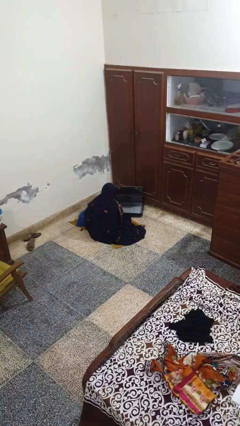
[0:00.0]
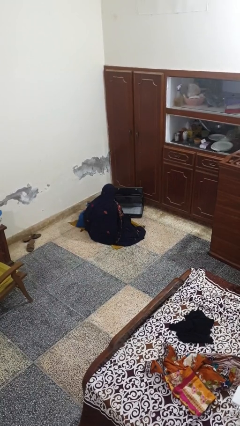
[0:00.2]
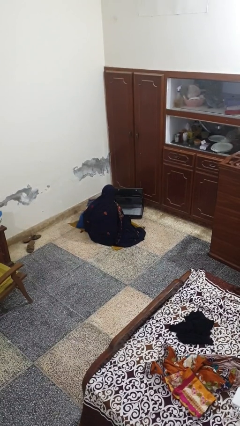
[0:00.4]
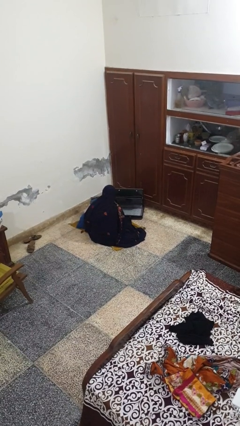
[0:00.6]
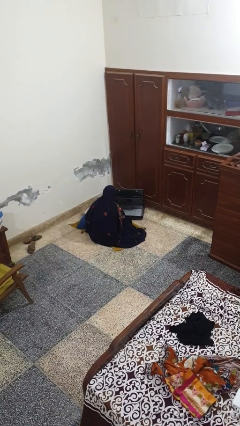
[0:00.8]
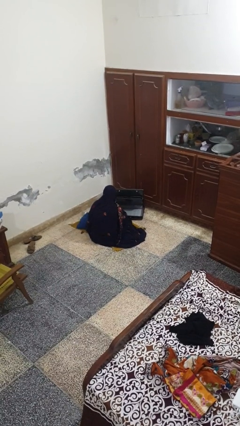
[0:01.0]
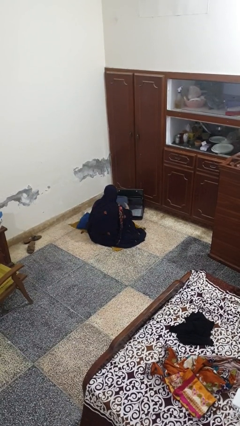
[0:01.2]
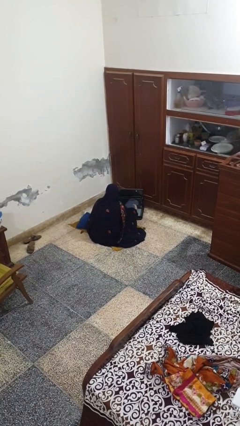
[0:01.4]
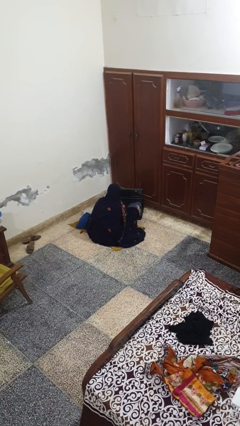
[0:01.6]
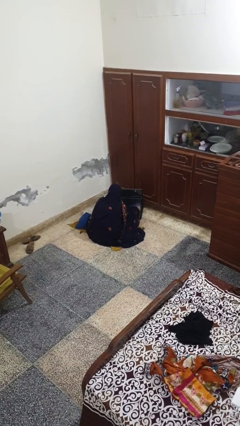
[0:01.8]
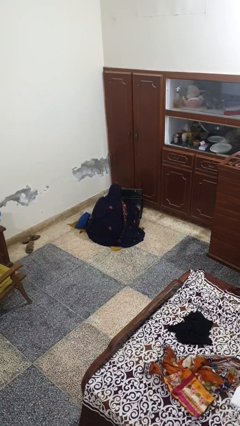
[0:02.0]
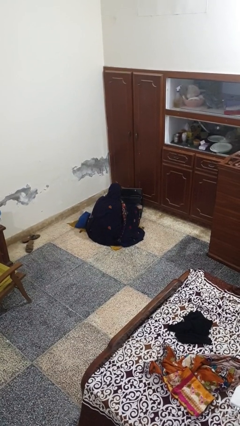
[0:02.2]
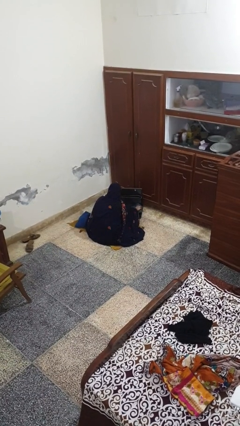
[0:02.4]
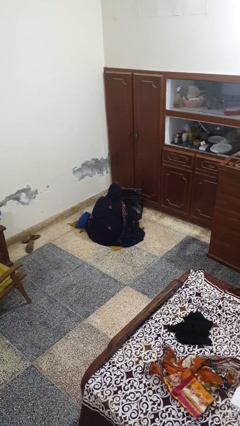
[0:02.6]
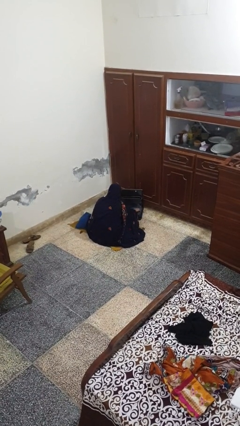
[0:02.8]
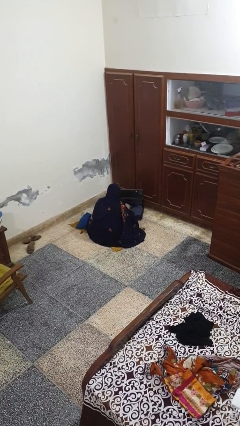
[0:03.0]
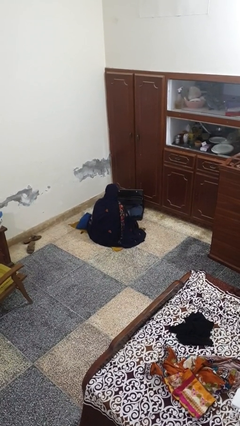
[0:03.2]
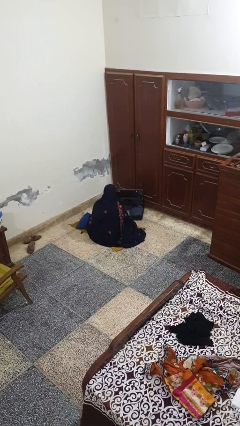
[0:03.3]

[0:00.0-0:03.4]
person loads clothes into suitcase

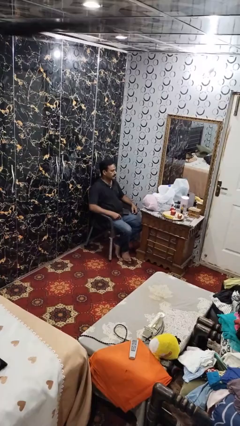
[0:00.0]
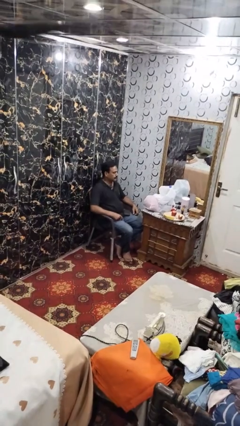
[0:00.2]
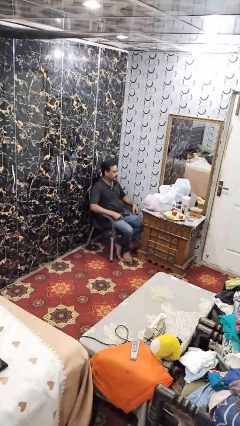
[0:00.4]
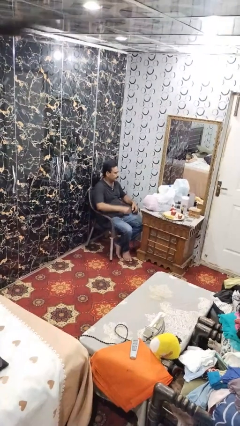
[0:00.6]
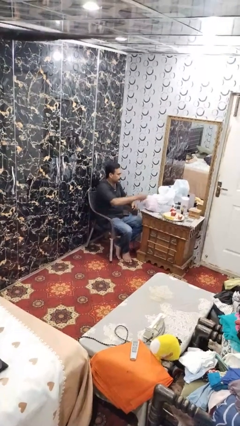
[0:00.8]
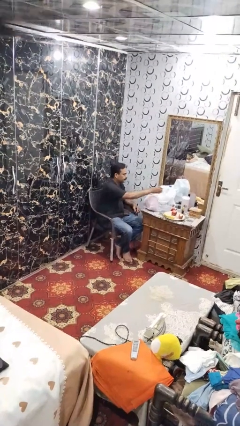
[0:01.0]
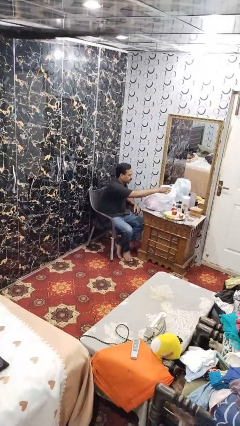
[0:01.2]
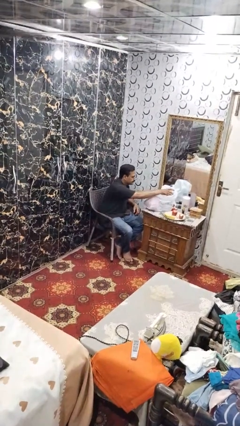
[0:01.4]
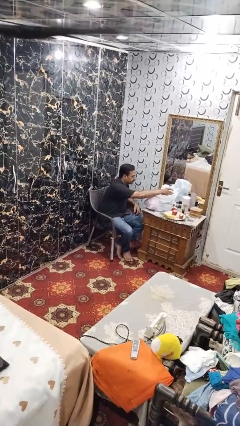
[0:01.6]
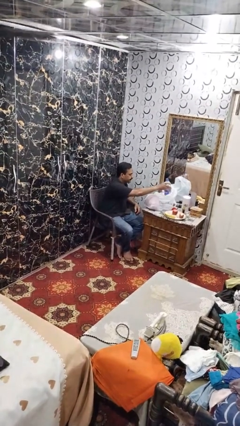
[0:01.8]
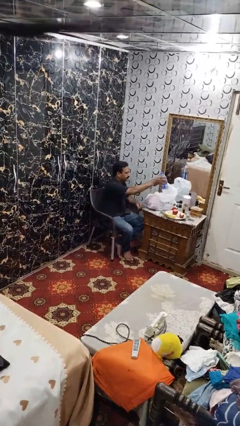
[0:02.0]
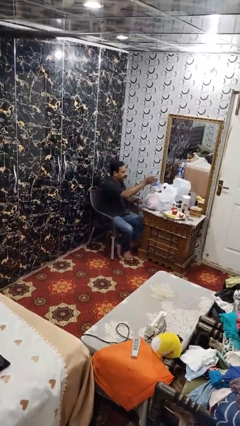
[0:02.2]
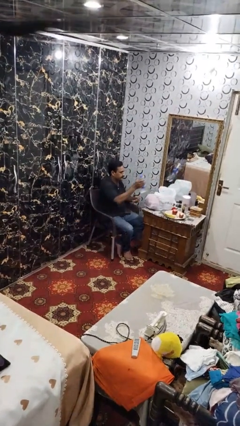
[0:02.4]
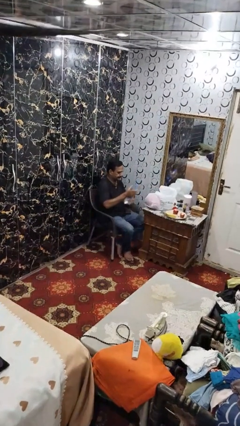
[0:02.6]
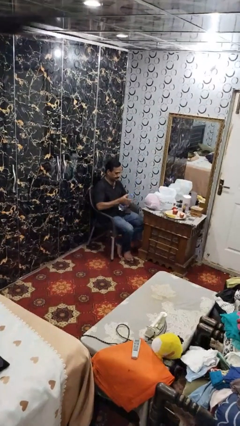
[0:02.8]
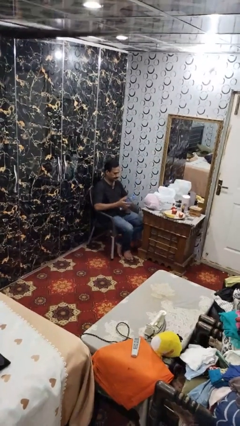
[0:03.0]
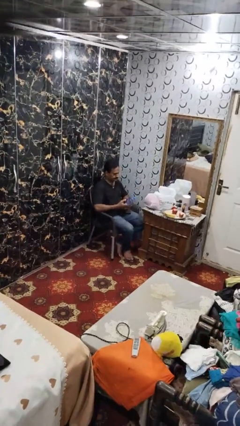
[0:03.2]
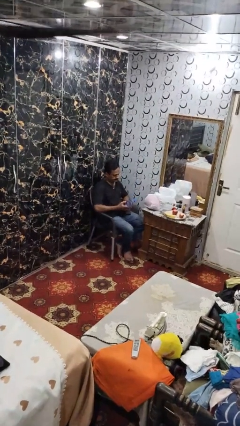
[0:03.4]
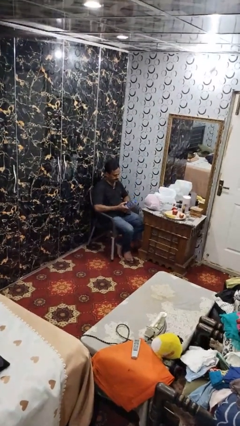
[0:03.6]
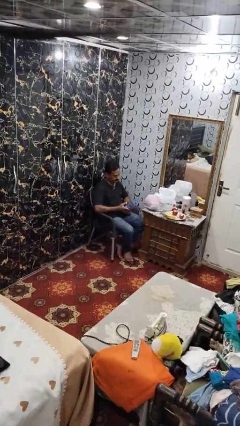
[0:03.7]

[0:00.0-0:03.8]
person takes object from bag

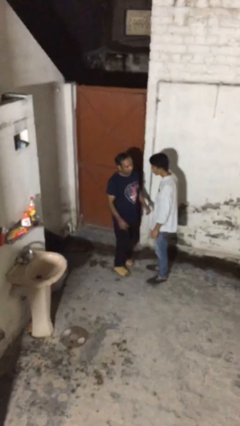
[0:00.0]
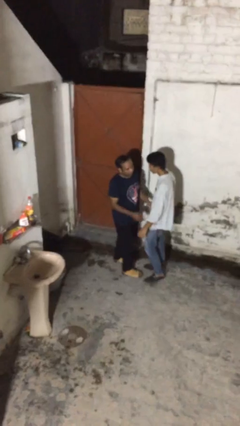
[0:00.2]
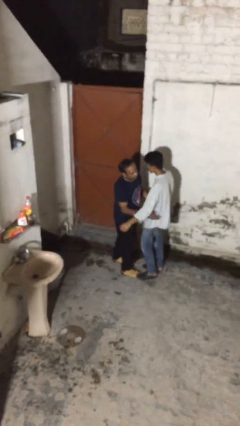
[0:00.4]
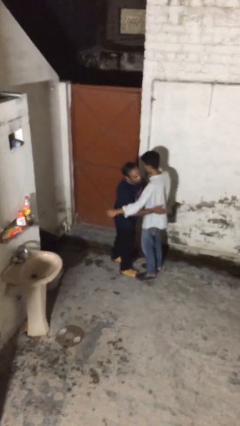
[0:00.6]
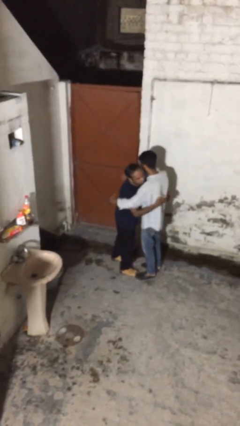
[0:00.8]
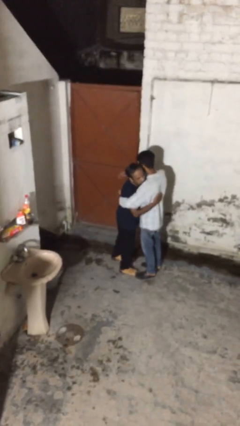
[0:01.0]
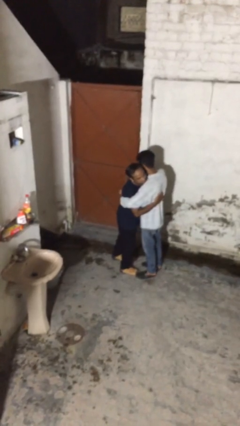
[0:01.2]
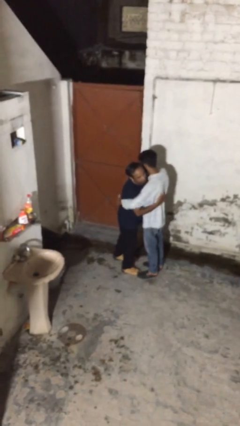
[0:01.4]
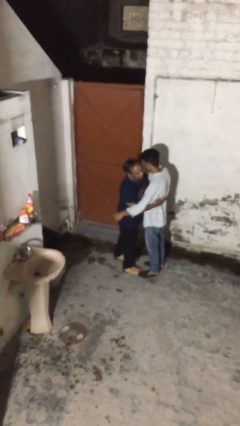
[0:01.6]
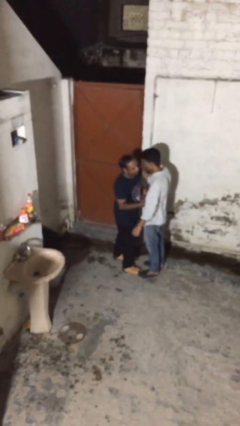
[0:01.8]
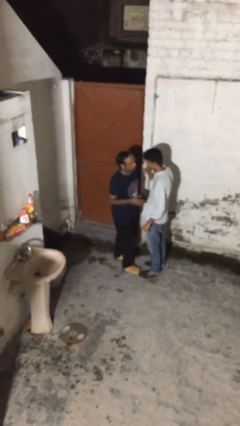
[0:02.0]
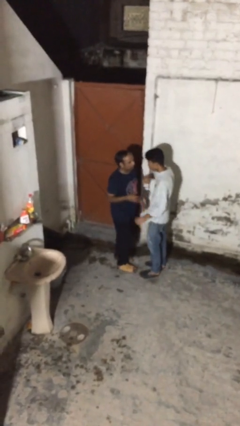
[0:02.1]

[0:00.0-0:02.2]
person embraces person

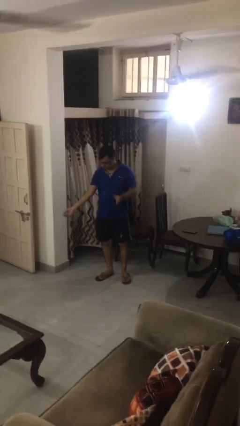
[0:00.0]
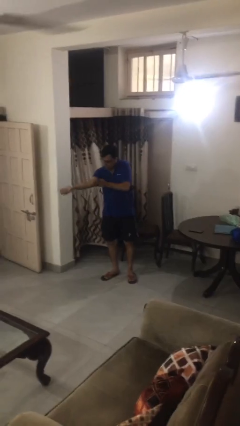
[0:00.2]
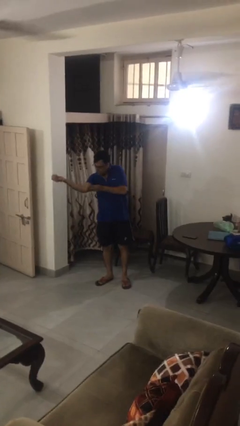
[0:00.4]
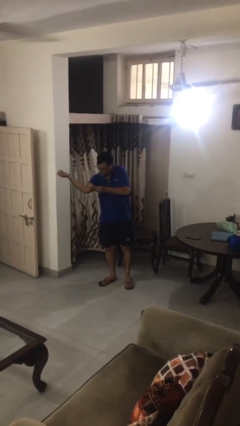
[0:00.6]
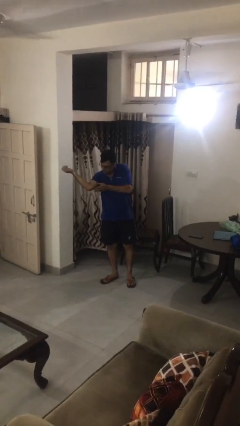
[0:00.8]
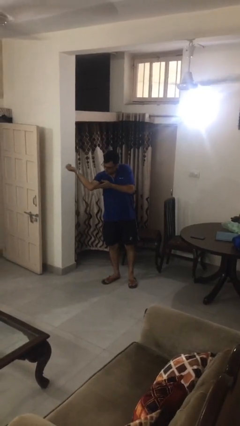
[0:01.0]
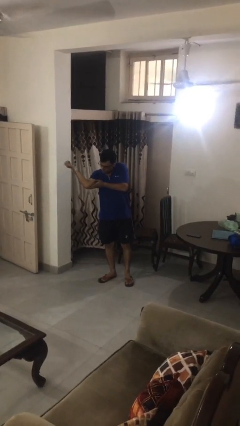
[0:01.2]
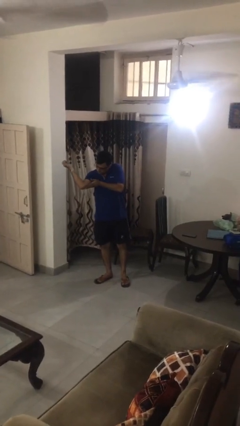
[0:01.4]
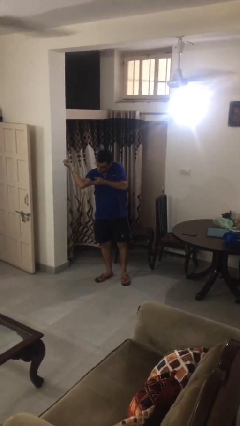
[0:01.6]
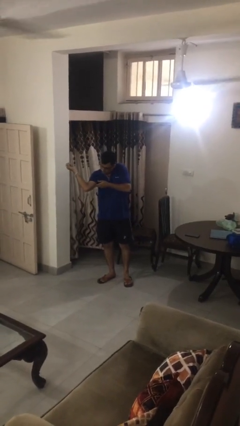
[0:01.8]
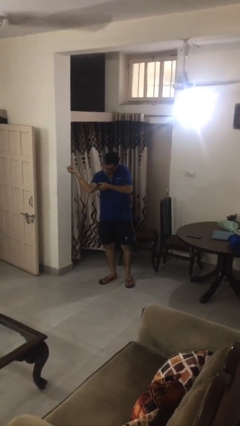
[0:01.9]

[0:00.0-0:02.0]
person swats bug

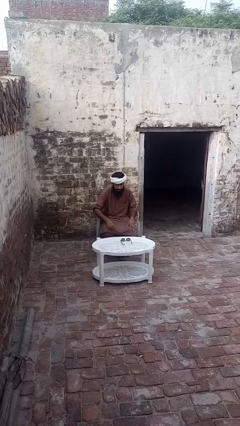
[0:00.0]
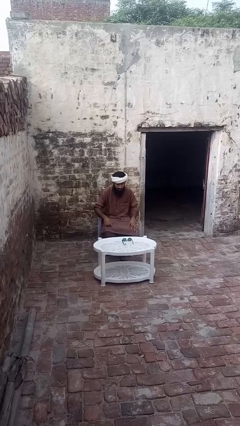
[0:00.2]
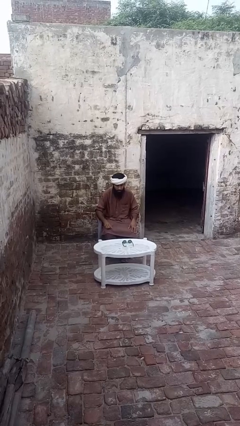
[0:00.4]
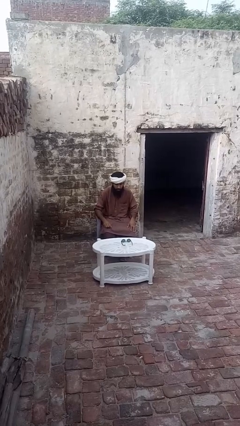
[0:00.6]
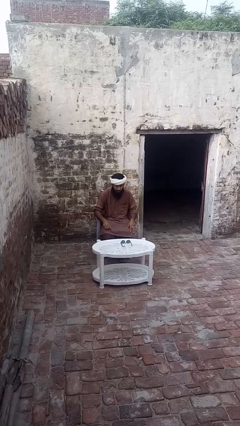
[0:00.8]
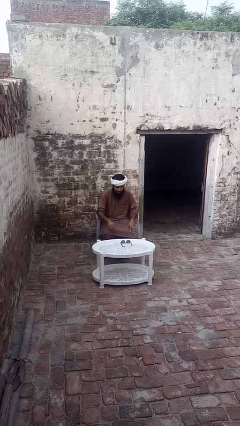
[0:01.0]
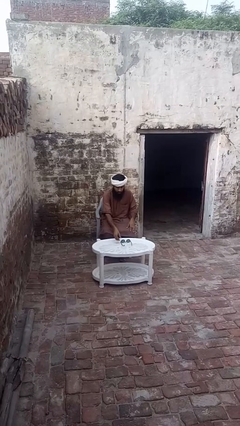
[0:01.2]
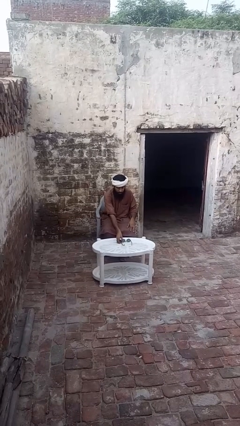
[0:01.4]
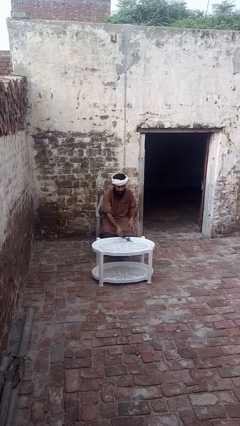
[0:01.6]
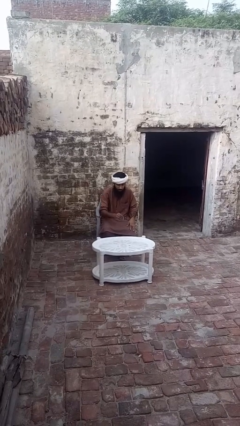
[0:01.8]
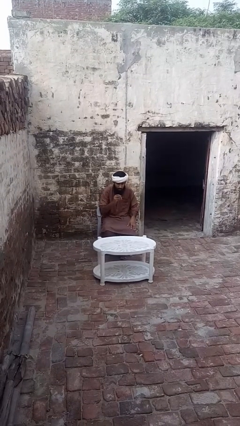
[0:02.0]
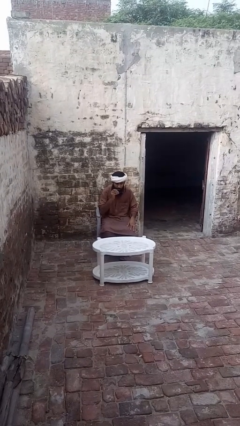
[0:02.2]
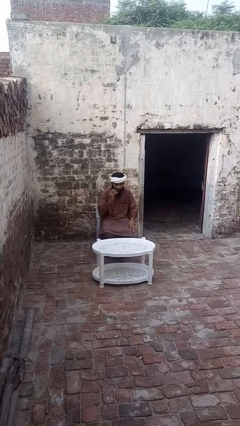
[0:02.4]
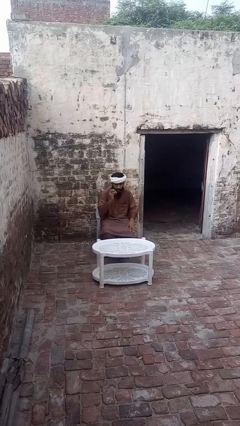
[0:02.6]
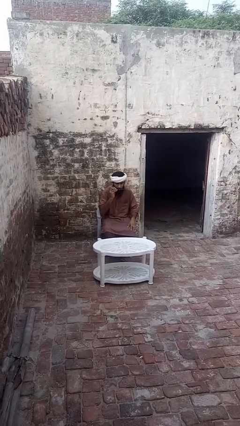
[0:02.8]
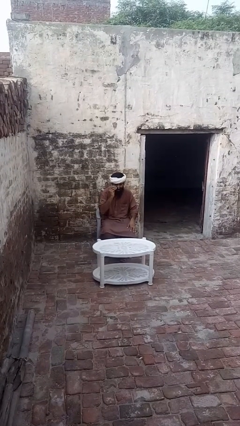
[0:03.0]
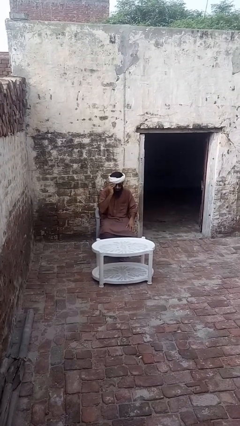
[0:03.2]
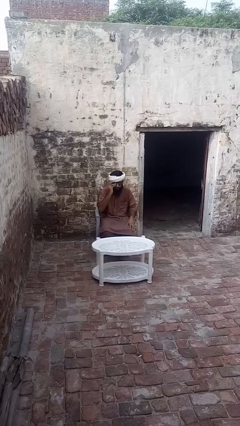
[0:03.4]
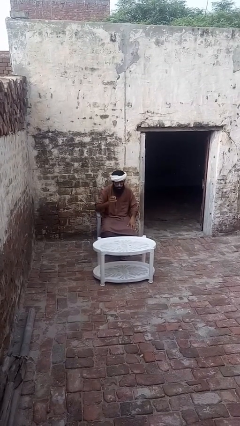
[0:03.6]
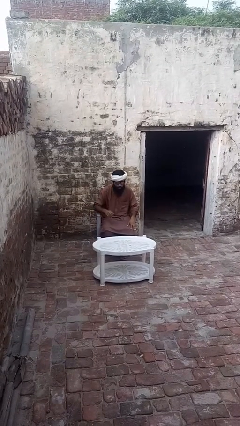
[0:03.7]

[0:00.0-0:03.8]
person puts on sunglasses

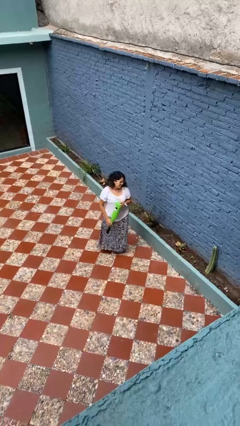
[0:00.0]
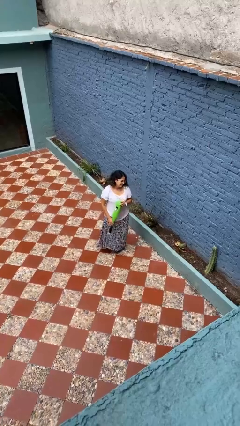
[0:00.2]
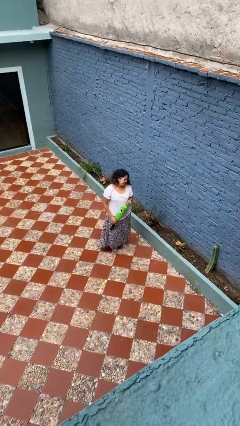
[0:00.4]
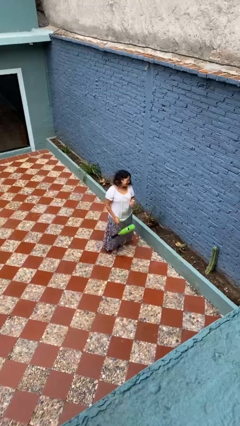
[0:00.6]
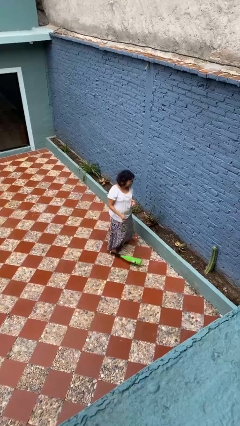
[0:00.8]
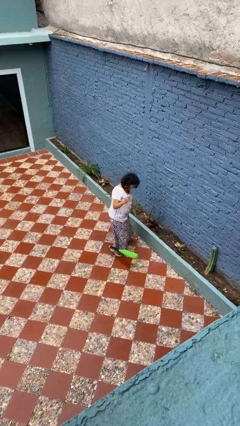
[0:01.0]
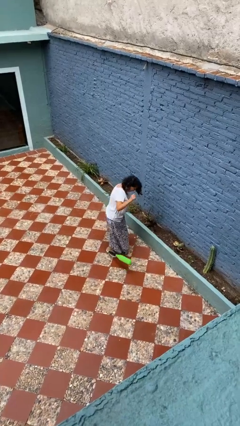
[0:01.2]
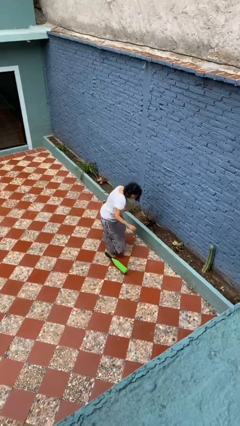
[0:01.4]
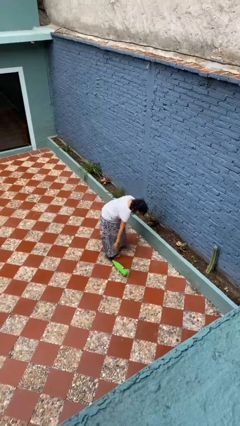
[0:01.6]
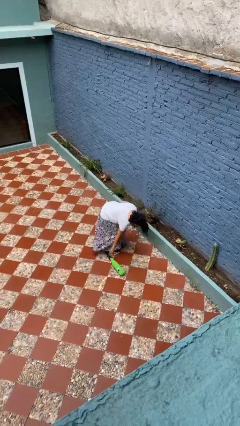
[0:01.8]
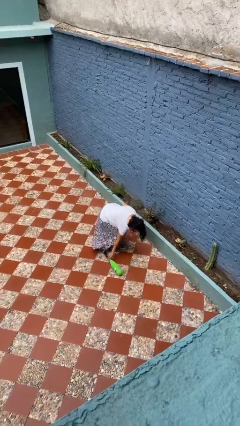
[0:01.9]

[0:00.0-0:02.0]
person drops object

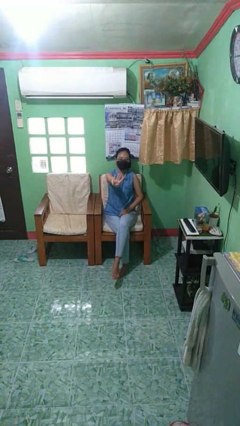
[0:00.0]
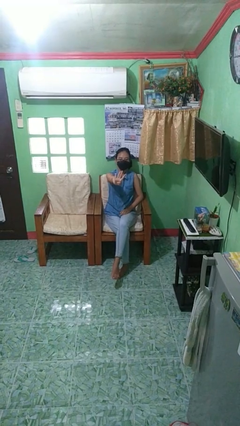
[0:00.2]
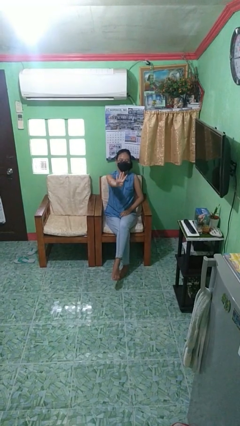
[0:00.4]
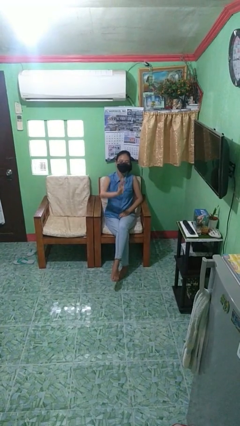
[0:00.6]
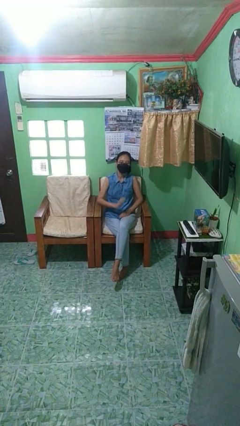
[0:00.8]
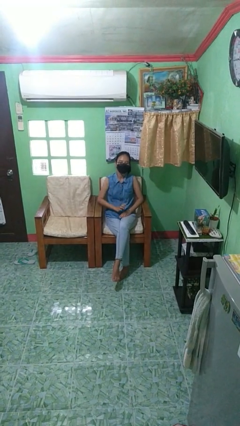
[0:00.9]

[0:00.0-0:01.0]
person gestures number four
